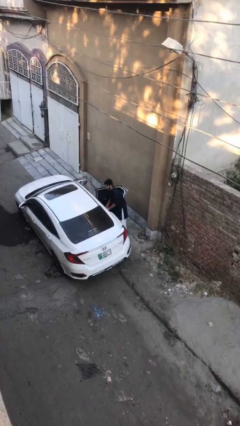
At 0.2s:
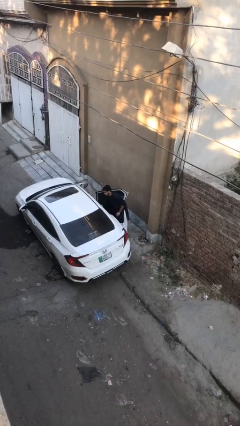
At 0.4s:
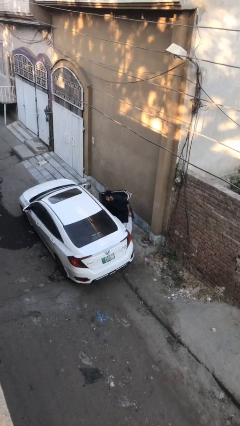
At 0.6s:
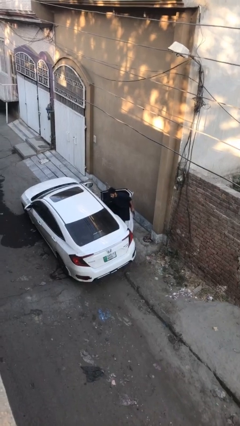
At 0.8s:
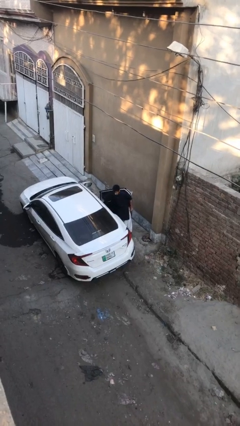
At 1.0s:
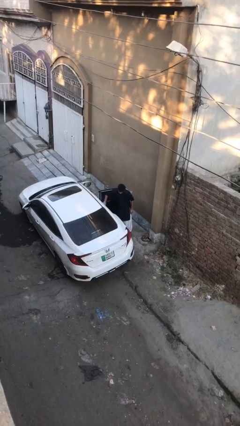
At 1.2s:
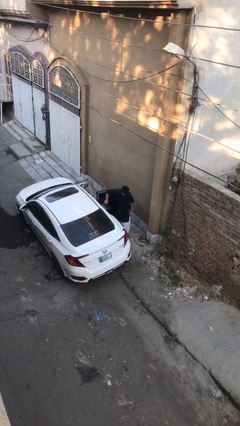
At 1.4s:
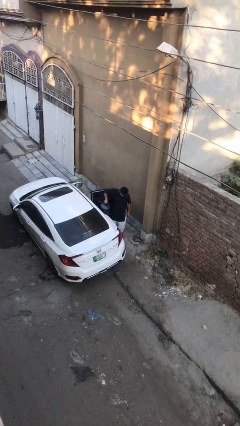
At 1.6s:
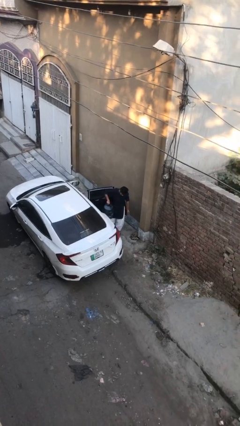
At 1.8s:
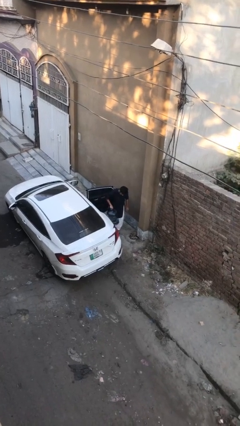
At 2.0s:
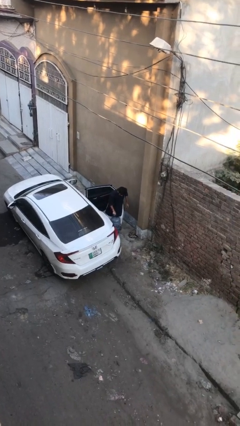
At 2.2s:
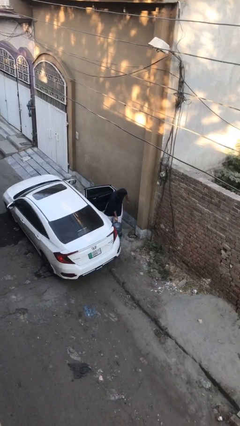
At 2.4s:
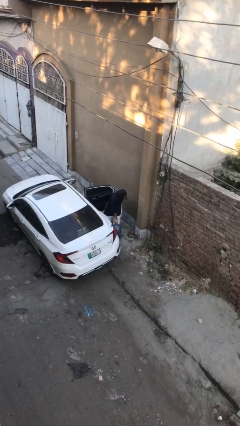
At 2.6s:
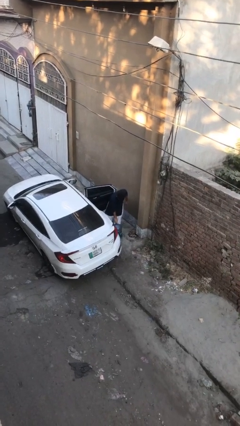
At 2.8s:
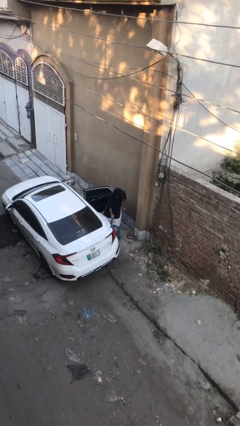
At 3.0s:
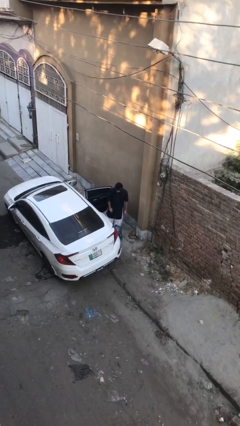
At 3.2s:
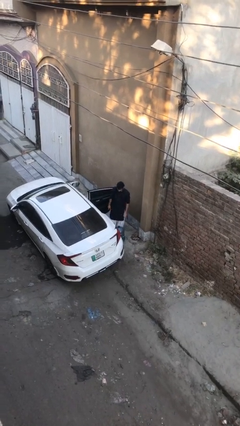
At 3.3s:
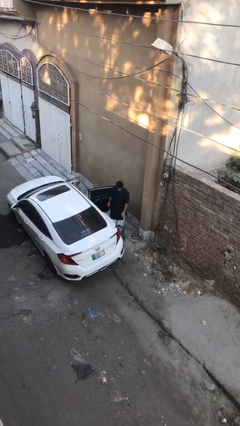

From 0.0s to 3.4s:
person unloads car

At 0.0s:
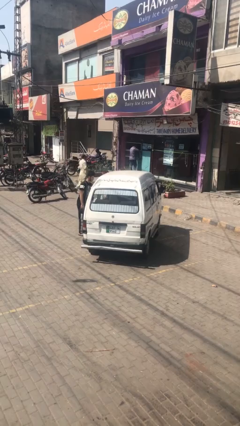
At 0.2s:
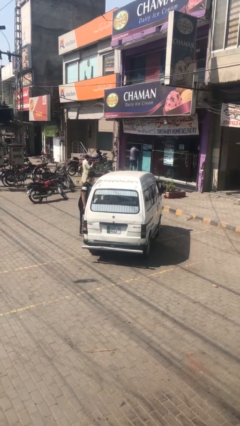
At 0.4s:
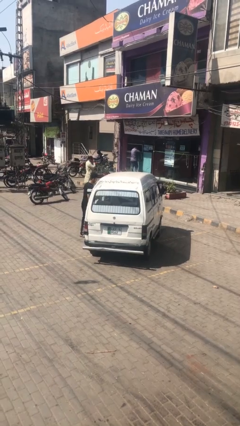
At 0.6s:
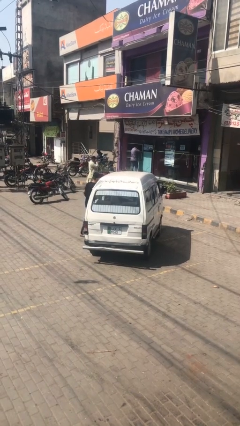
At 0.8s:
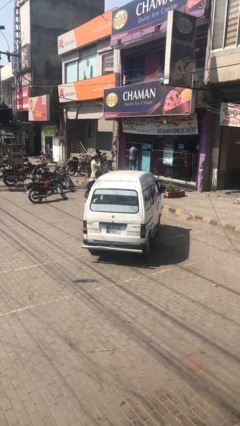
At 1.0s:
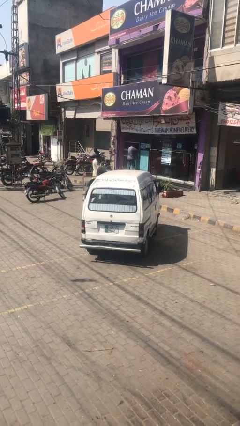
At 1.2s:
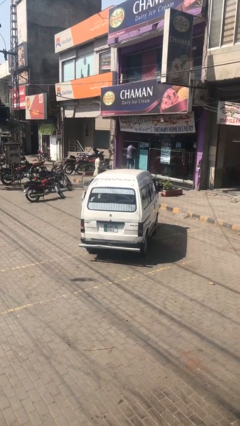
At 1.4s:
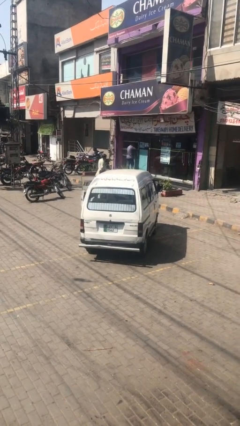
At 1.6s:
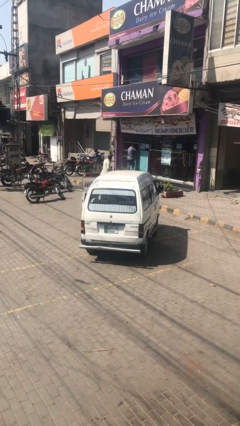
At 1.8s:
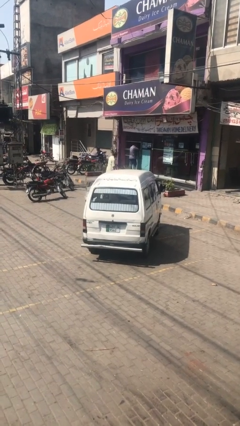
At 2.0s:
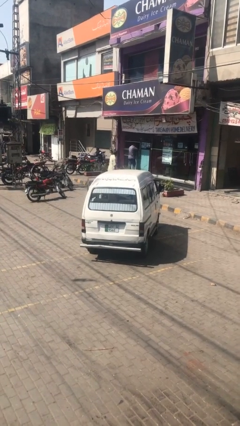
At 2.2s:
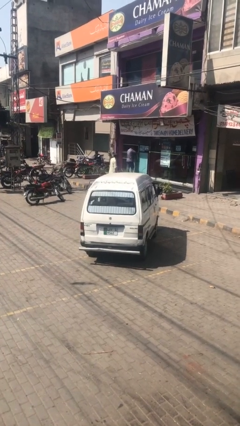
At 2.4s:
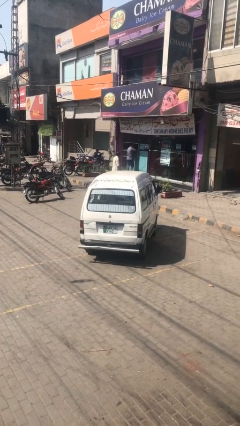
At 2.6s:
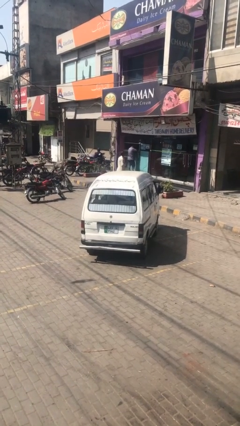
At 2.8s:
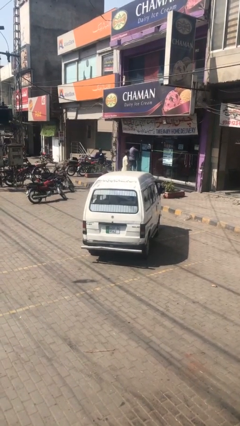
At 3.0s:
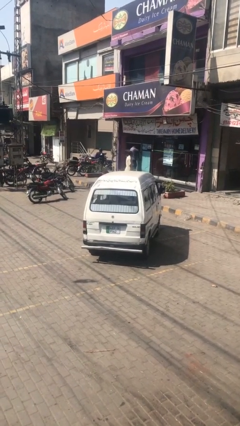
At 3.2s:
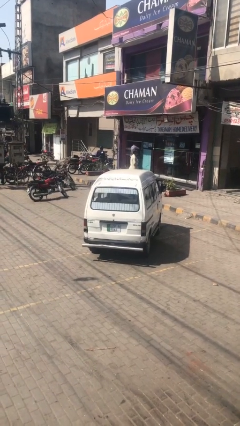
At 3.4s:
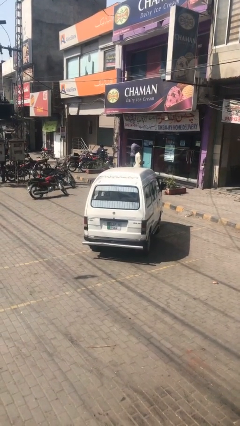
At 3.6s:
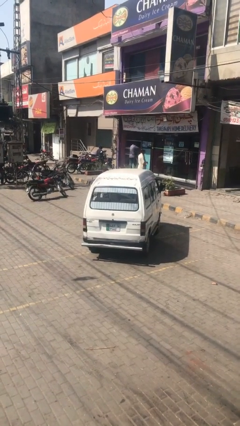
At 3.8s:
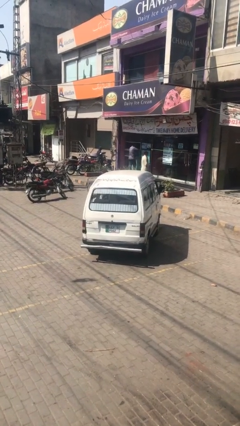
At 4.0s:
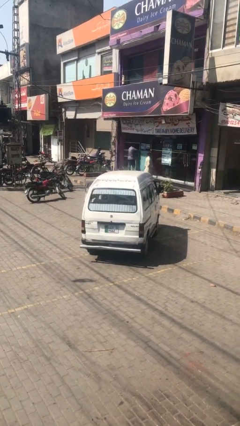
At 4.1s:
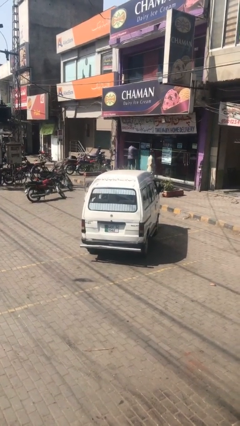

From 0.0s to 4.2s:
car picks up person

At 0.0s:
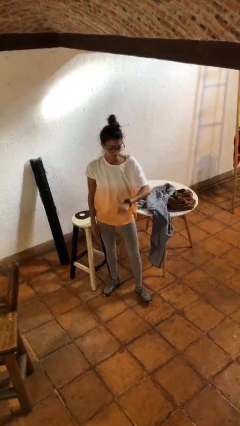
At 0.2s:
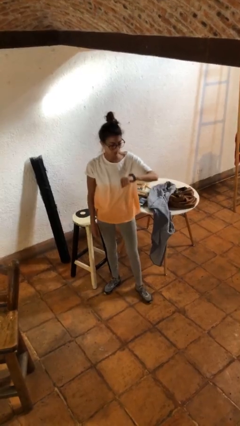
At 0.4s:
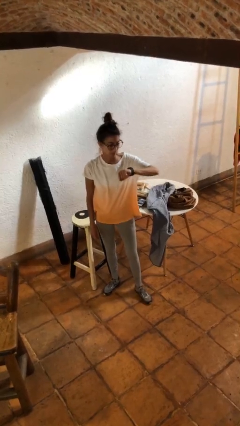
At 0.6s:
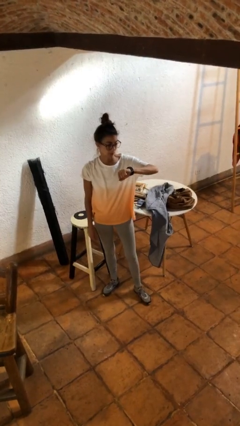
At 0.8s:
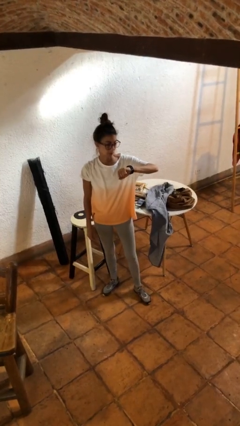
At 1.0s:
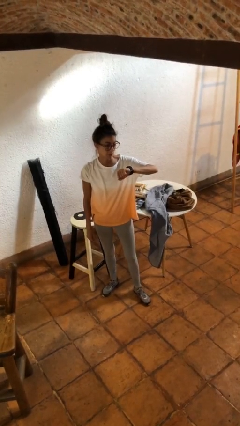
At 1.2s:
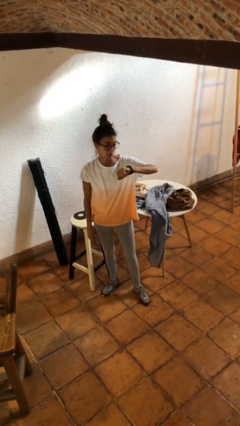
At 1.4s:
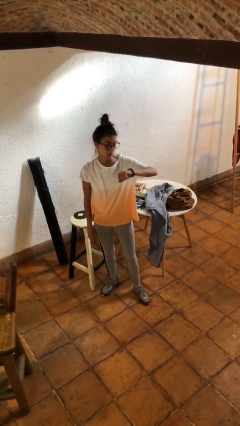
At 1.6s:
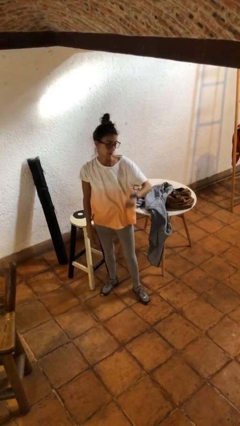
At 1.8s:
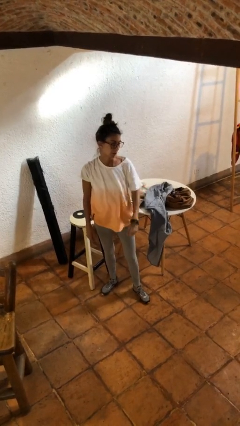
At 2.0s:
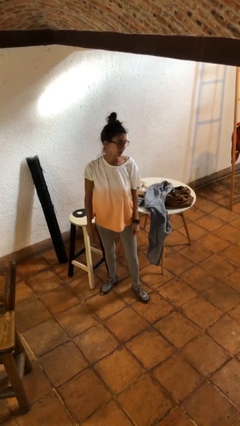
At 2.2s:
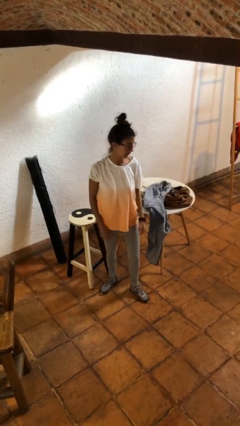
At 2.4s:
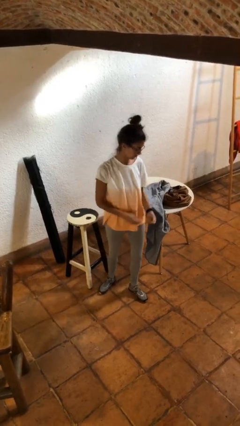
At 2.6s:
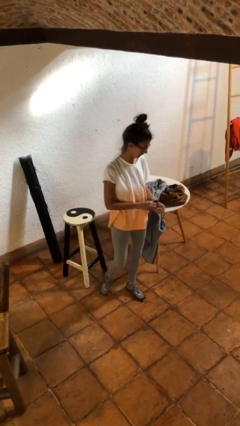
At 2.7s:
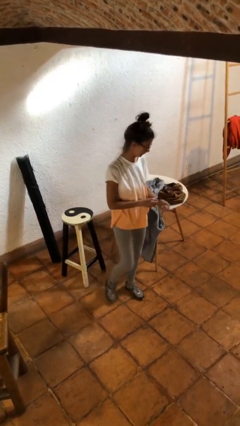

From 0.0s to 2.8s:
person looks at wristwatch

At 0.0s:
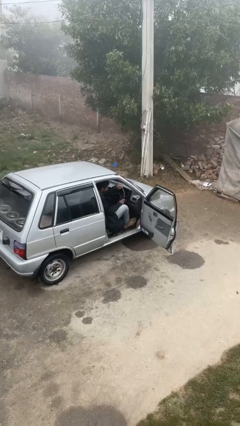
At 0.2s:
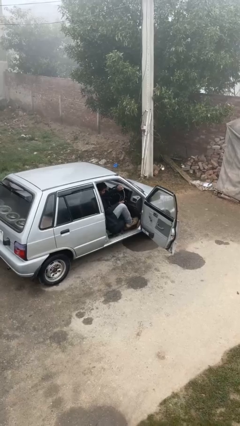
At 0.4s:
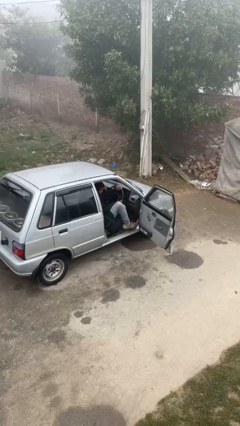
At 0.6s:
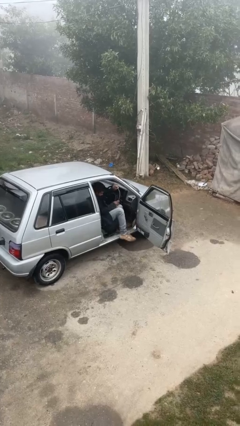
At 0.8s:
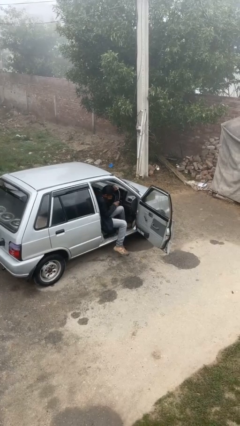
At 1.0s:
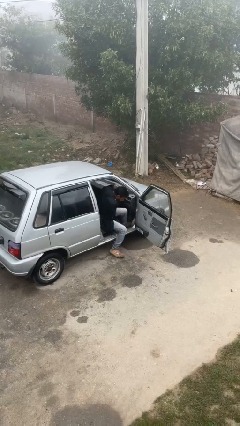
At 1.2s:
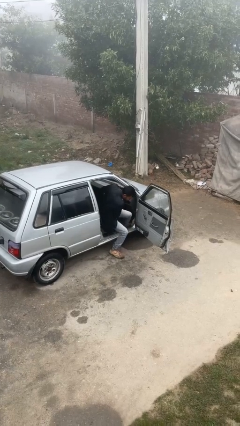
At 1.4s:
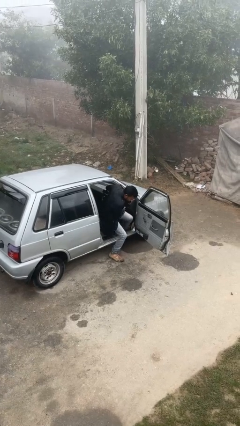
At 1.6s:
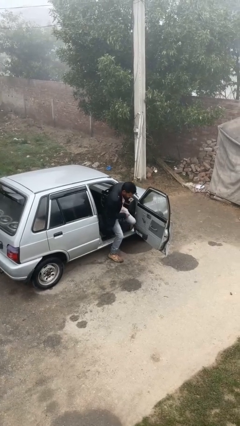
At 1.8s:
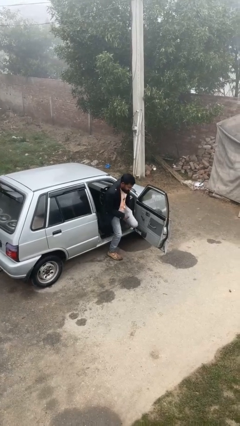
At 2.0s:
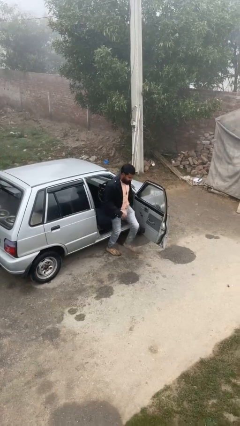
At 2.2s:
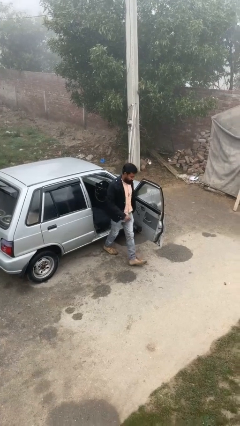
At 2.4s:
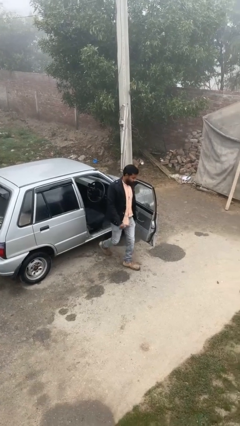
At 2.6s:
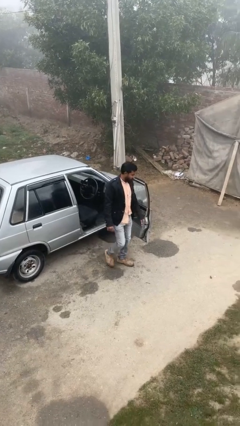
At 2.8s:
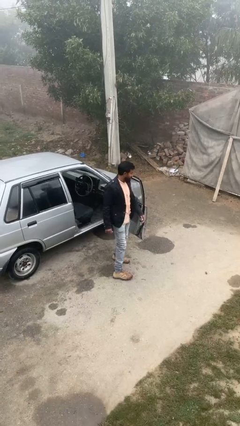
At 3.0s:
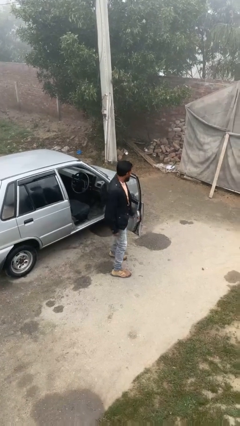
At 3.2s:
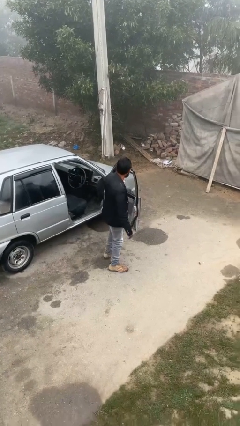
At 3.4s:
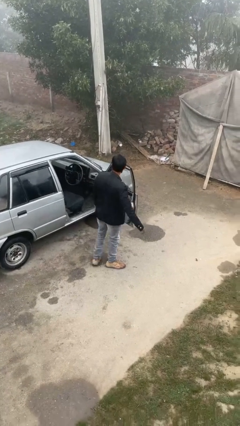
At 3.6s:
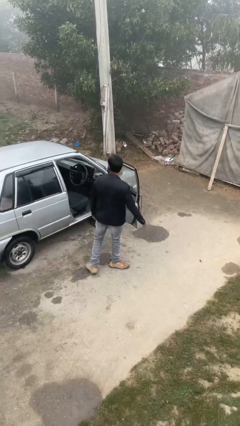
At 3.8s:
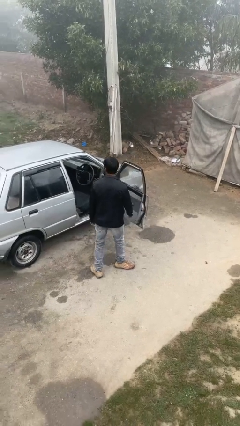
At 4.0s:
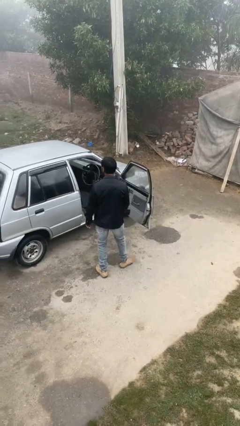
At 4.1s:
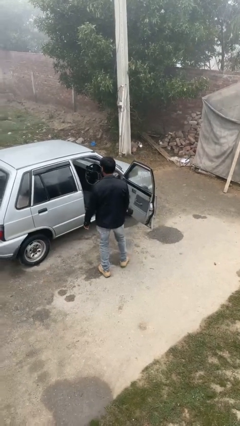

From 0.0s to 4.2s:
person exits car

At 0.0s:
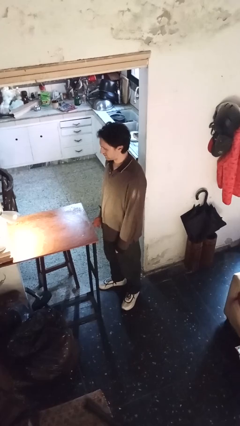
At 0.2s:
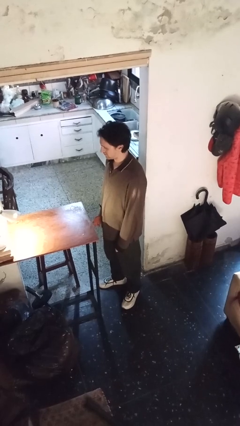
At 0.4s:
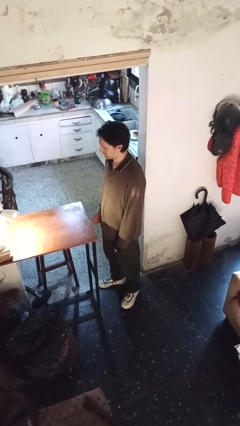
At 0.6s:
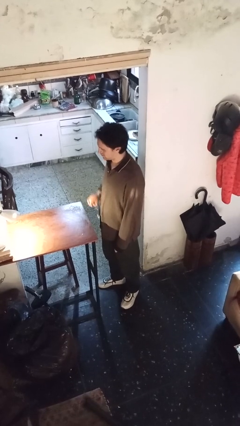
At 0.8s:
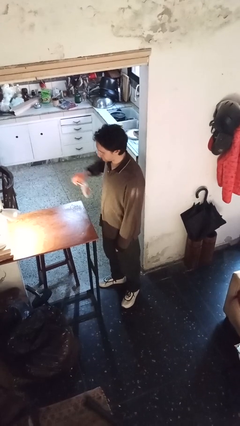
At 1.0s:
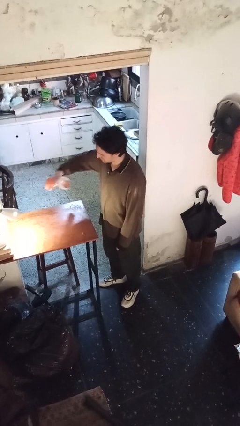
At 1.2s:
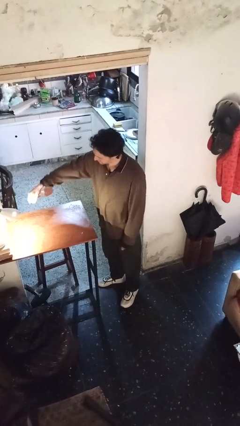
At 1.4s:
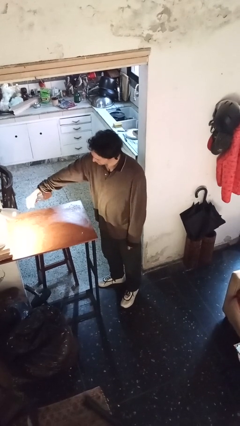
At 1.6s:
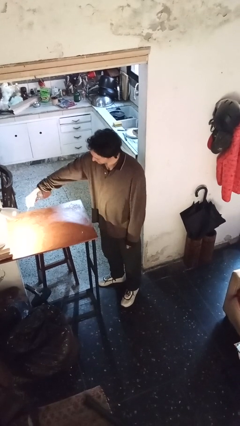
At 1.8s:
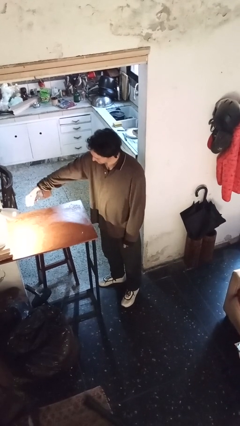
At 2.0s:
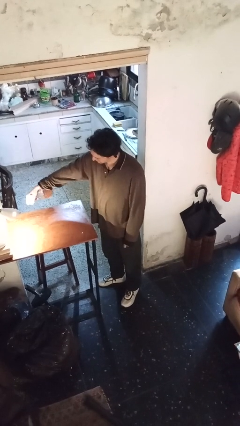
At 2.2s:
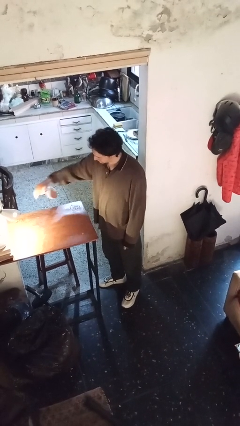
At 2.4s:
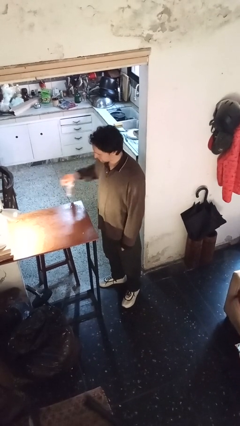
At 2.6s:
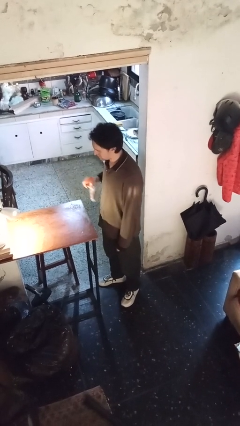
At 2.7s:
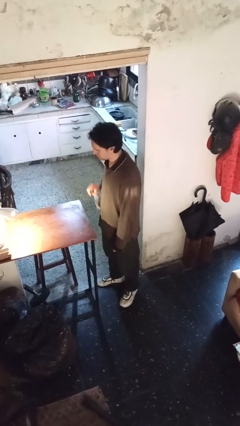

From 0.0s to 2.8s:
person sprays from bottle
